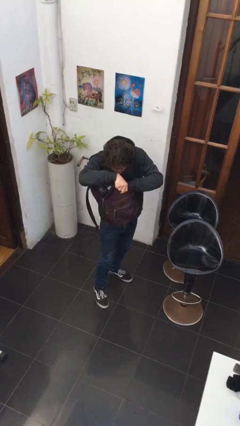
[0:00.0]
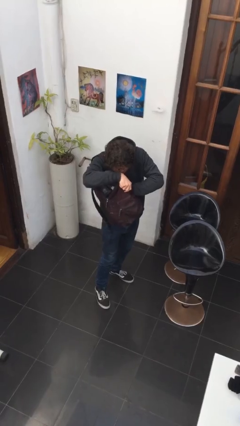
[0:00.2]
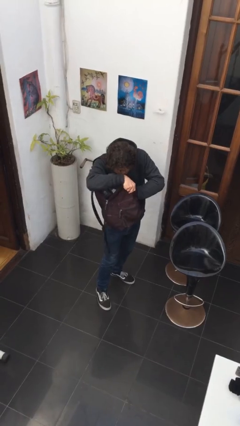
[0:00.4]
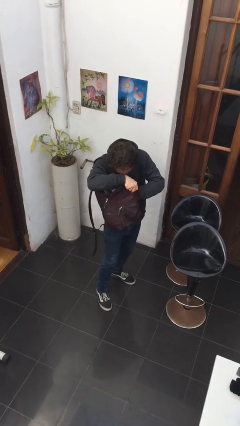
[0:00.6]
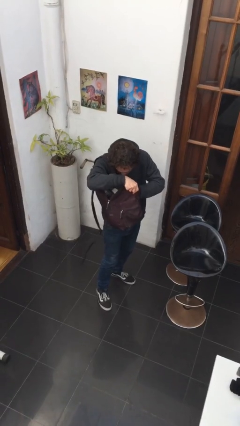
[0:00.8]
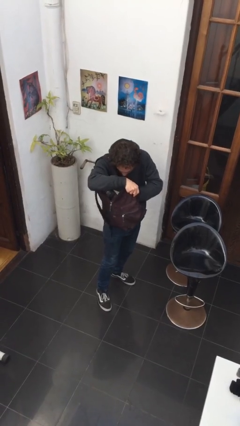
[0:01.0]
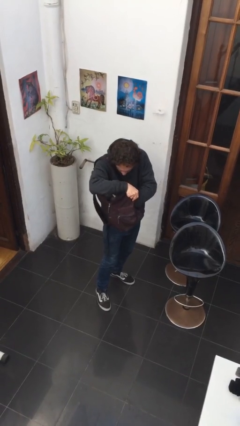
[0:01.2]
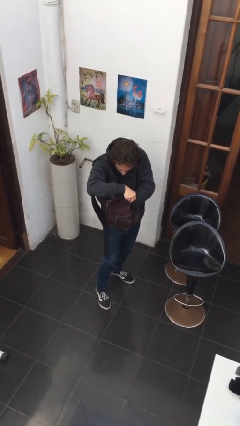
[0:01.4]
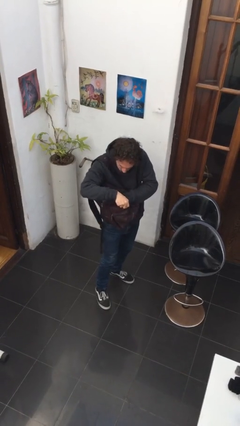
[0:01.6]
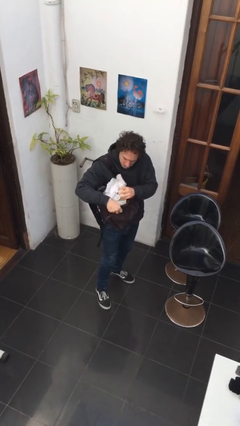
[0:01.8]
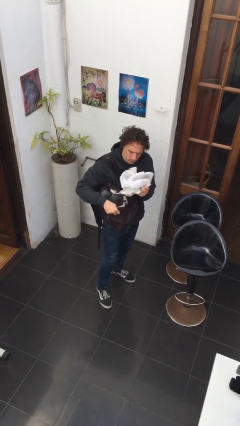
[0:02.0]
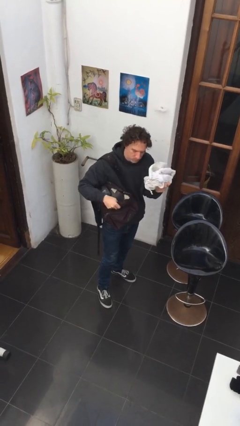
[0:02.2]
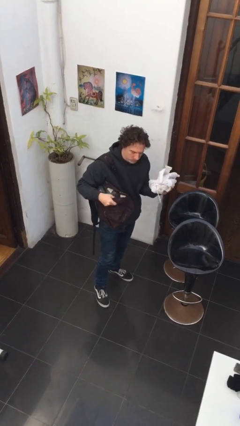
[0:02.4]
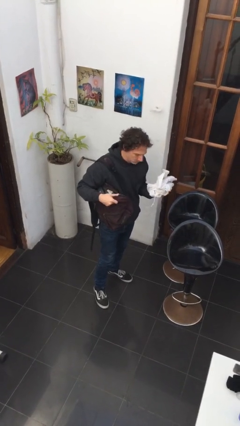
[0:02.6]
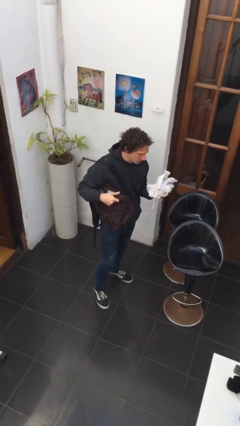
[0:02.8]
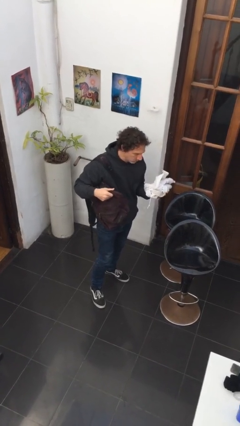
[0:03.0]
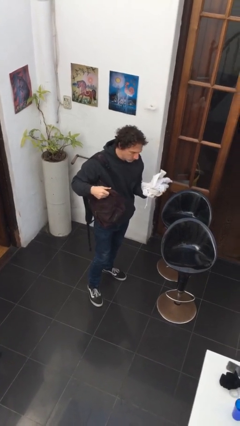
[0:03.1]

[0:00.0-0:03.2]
person takes object from backpack

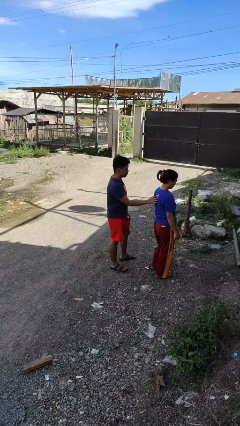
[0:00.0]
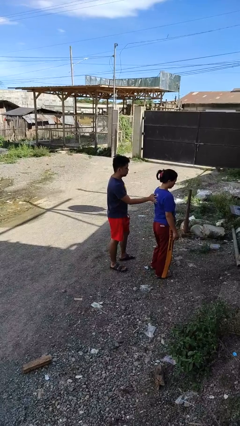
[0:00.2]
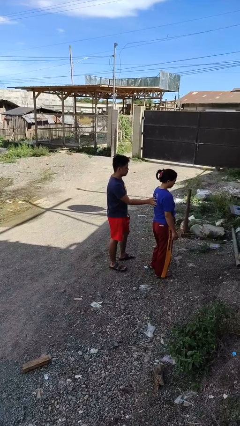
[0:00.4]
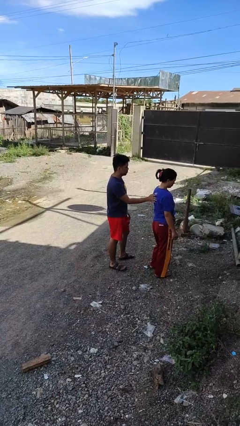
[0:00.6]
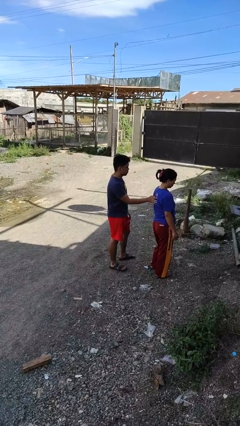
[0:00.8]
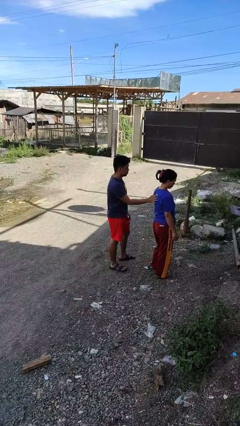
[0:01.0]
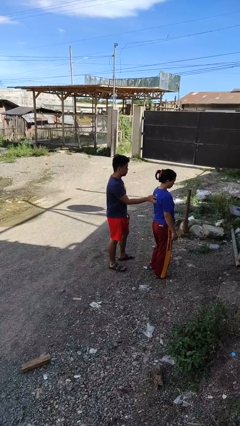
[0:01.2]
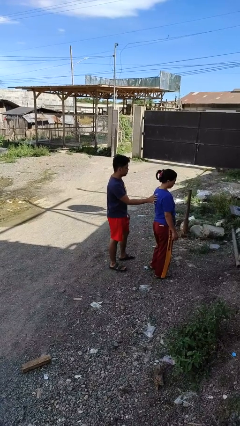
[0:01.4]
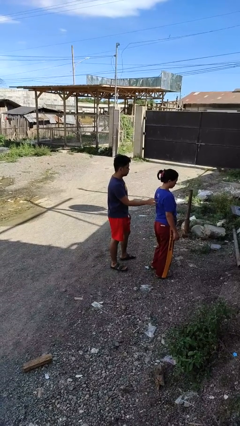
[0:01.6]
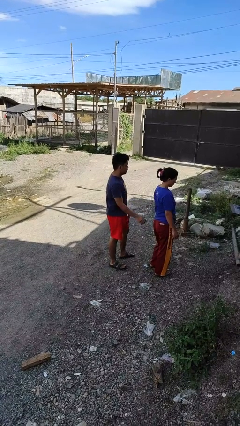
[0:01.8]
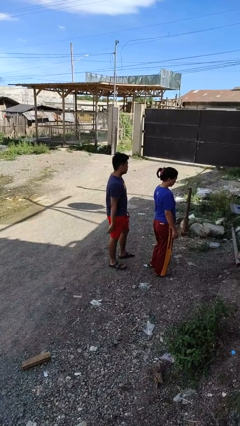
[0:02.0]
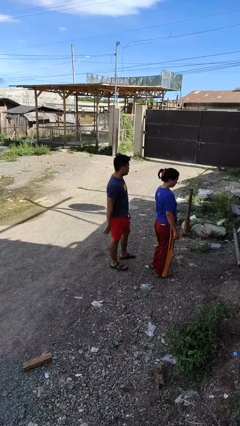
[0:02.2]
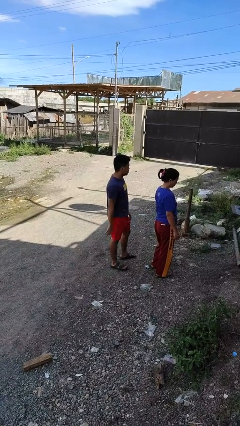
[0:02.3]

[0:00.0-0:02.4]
person touches back of person

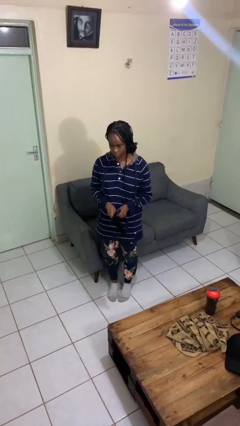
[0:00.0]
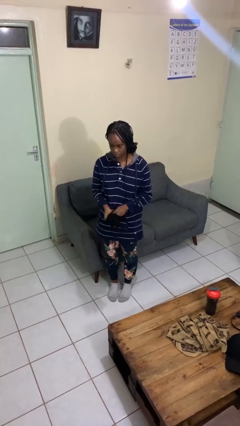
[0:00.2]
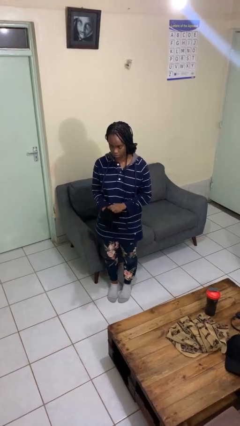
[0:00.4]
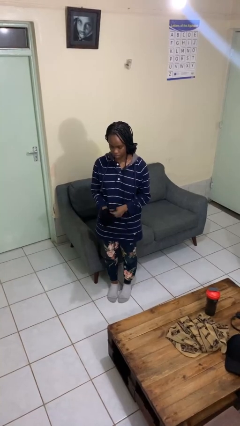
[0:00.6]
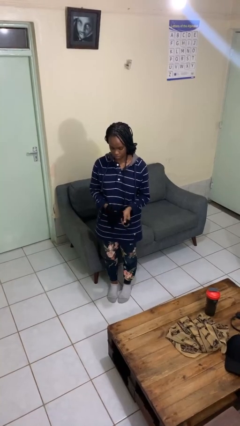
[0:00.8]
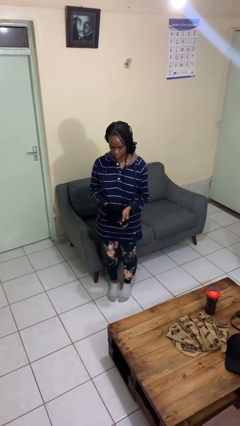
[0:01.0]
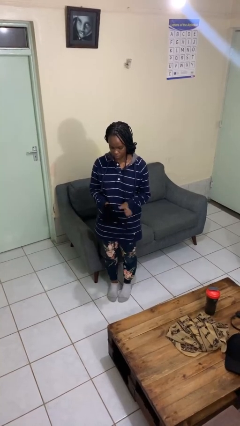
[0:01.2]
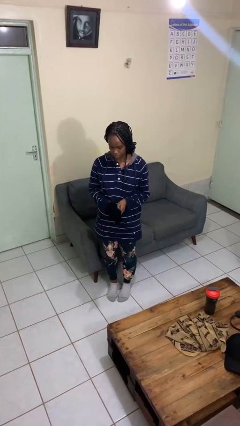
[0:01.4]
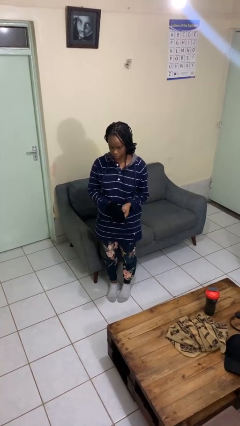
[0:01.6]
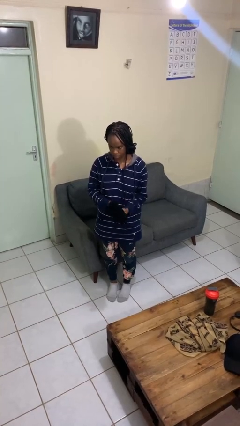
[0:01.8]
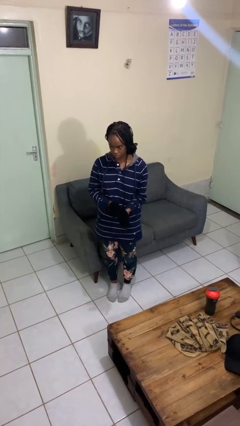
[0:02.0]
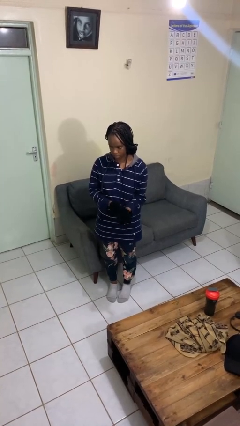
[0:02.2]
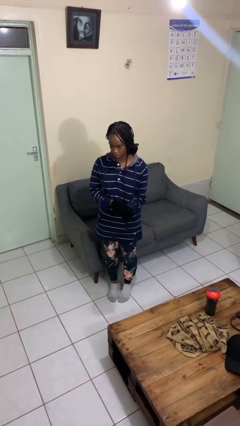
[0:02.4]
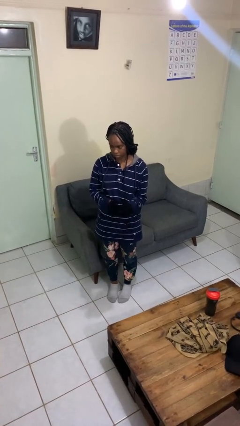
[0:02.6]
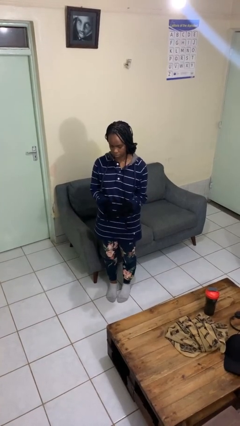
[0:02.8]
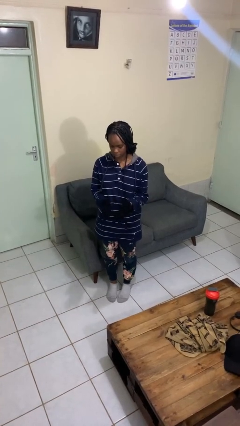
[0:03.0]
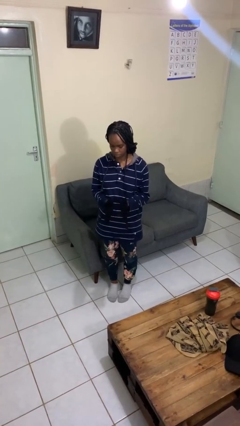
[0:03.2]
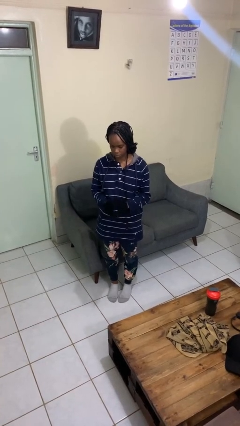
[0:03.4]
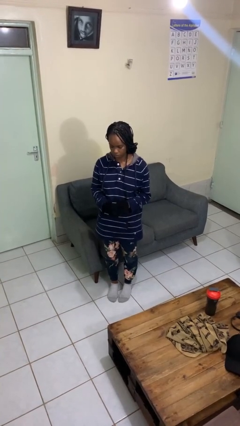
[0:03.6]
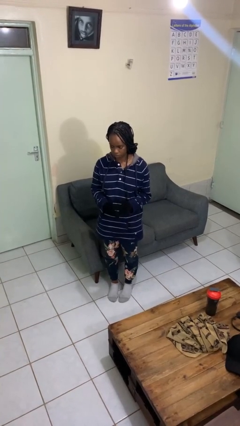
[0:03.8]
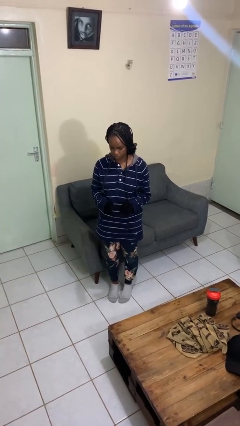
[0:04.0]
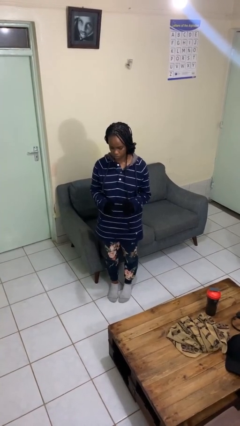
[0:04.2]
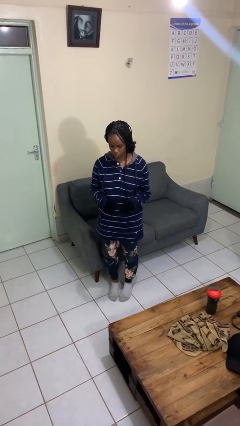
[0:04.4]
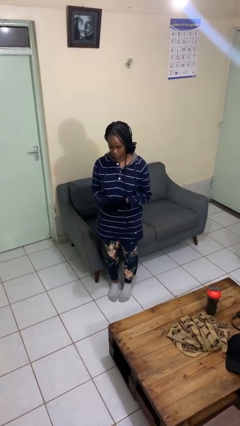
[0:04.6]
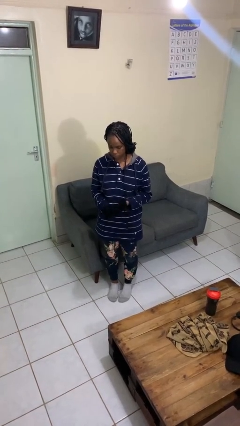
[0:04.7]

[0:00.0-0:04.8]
person puts on gloves

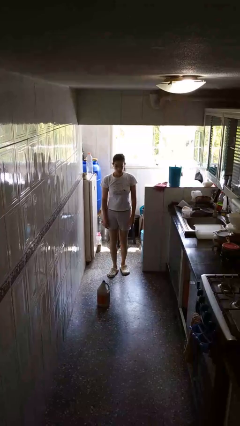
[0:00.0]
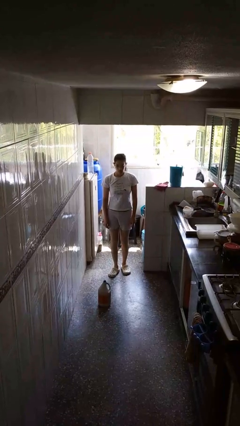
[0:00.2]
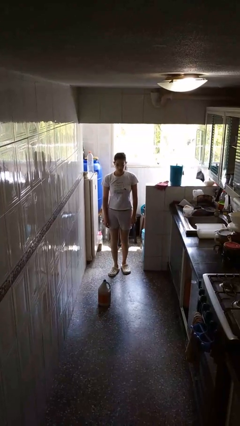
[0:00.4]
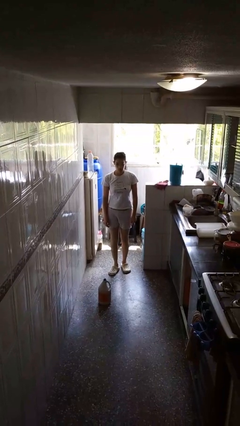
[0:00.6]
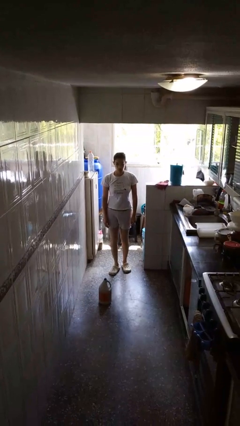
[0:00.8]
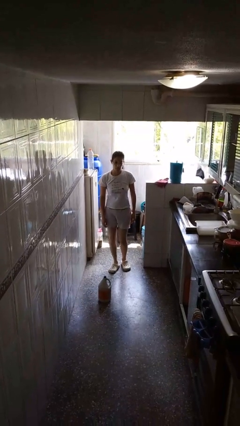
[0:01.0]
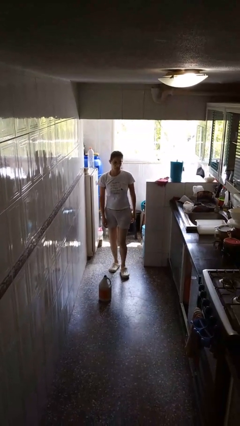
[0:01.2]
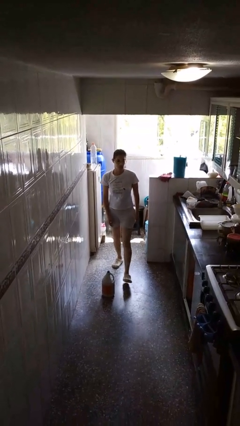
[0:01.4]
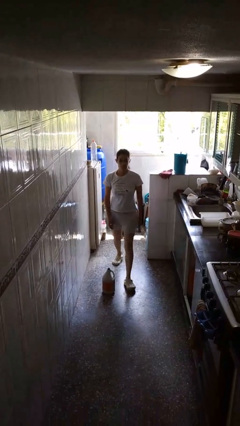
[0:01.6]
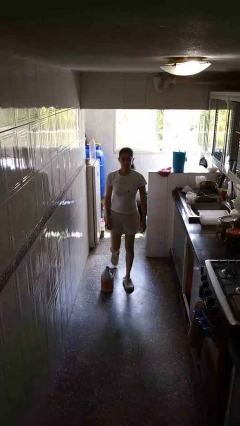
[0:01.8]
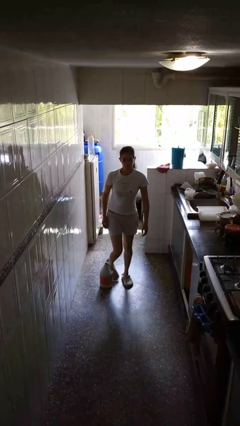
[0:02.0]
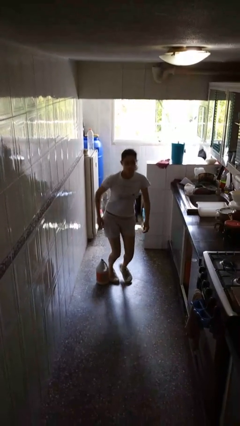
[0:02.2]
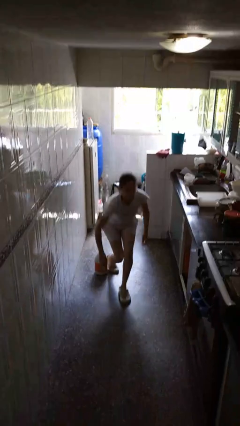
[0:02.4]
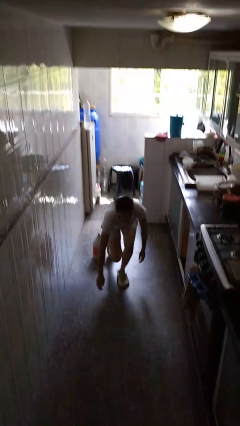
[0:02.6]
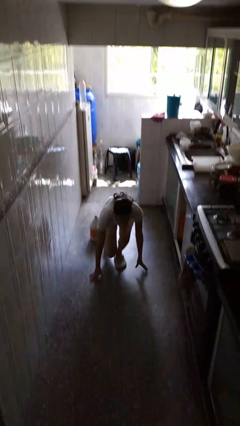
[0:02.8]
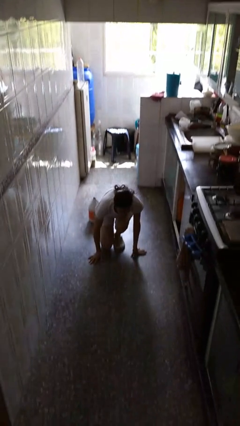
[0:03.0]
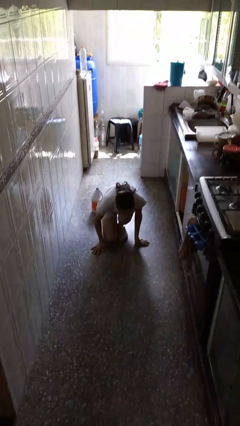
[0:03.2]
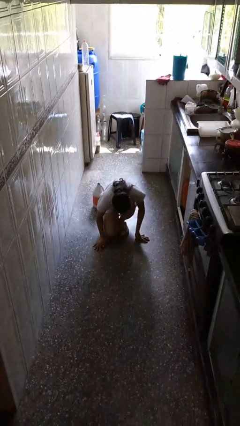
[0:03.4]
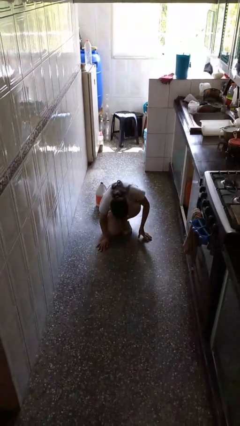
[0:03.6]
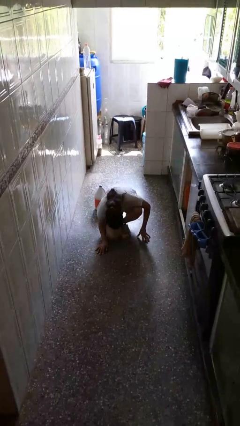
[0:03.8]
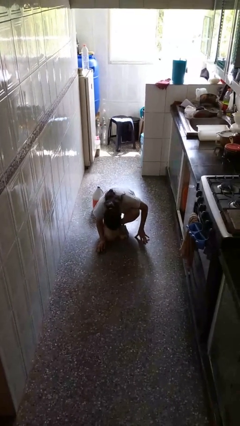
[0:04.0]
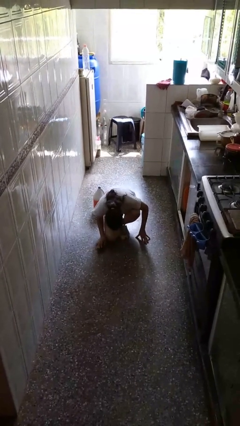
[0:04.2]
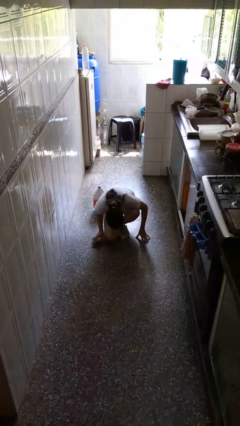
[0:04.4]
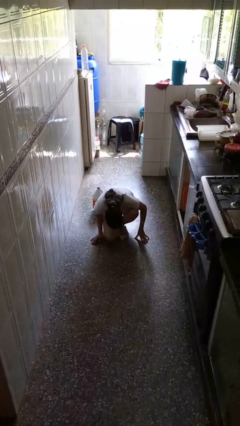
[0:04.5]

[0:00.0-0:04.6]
person trips on object on floor

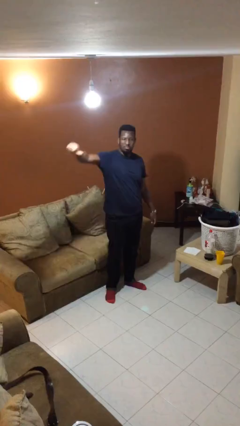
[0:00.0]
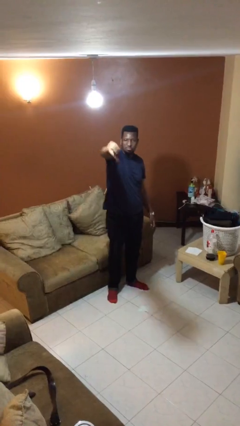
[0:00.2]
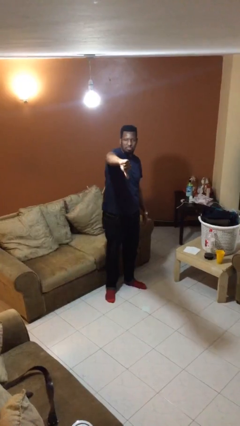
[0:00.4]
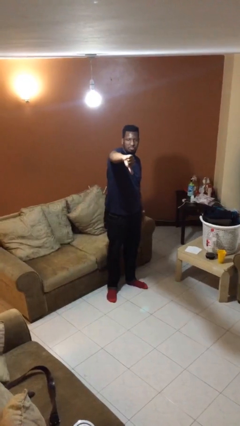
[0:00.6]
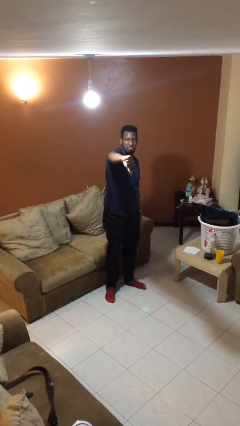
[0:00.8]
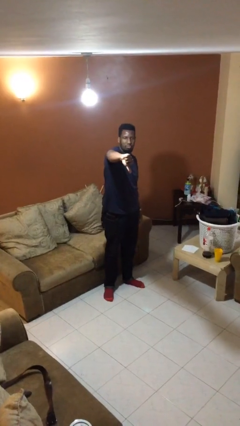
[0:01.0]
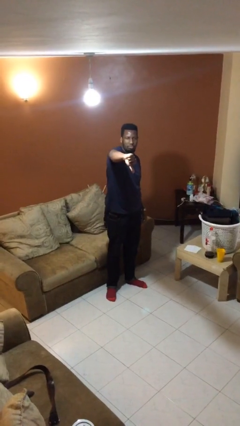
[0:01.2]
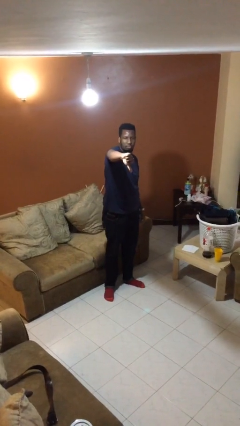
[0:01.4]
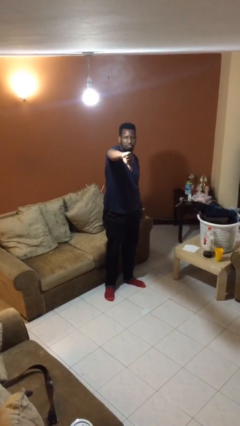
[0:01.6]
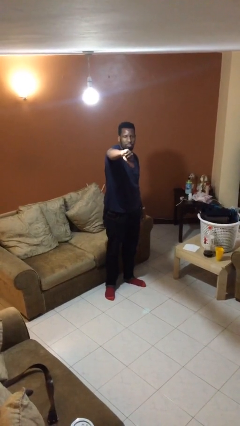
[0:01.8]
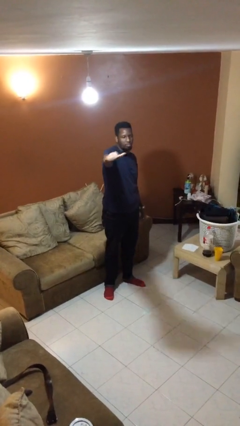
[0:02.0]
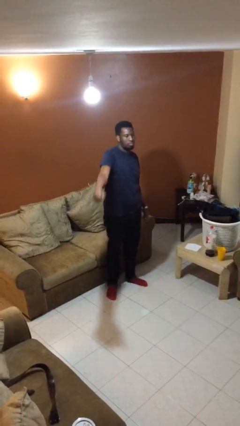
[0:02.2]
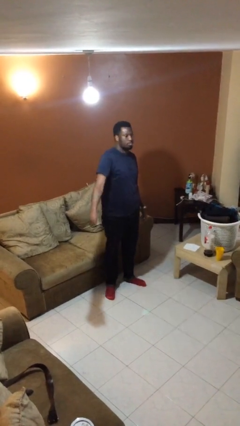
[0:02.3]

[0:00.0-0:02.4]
person gestures thumbs down

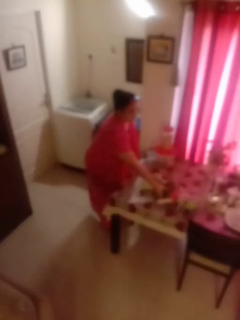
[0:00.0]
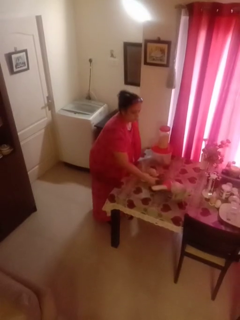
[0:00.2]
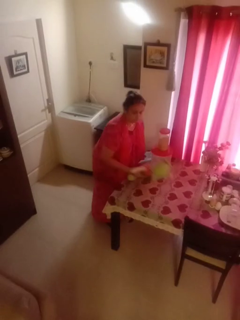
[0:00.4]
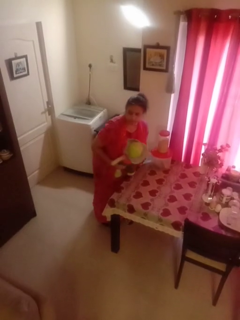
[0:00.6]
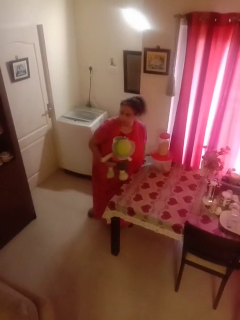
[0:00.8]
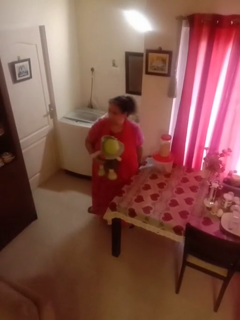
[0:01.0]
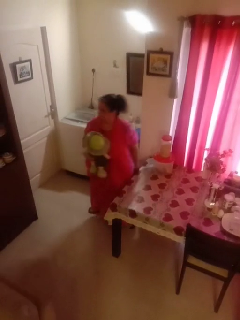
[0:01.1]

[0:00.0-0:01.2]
person picks up object from table
